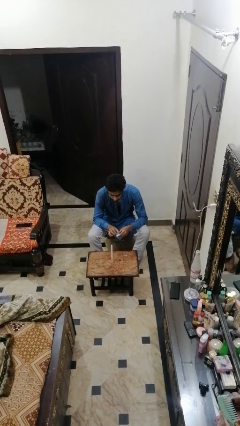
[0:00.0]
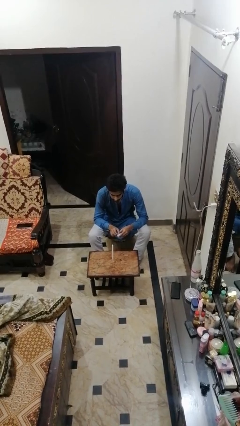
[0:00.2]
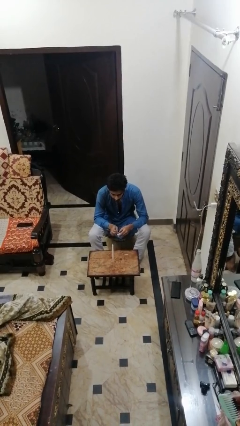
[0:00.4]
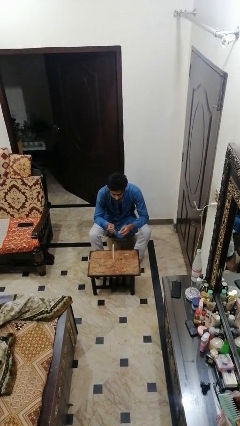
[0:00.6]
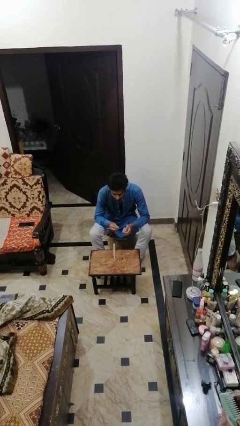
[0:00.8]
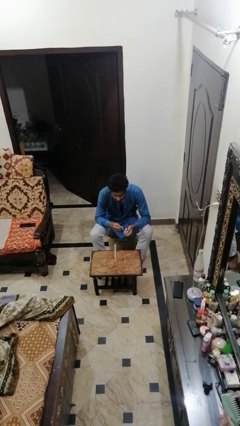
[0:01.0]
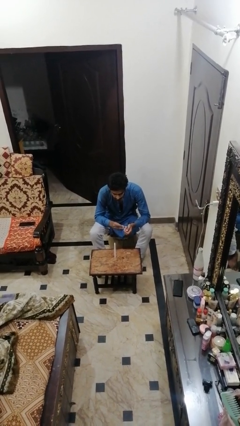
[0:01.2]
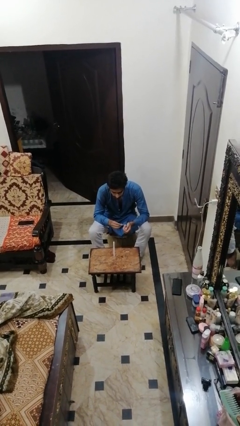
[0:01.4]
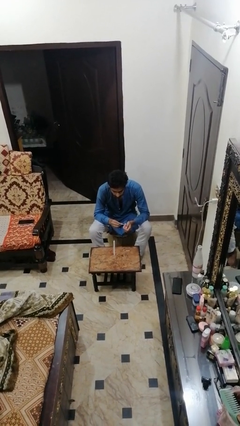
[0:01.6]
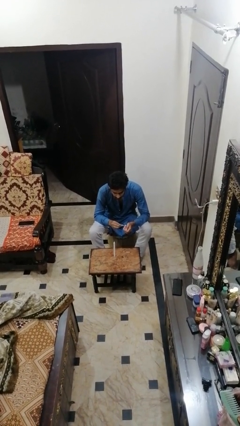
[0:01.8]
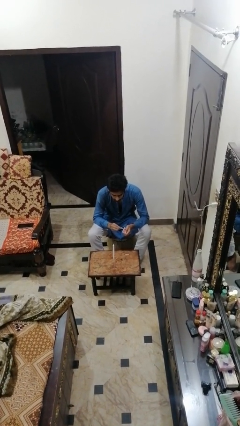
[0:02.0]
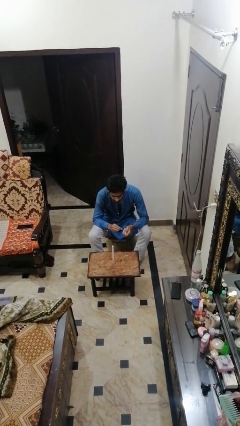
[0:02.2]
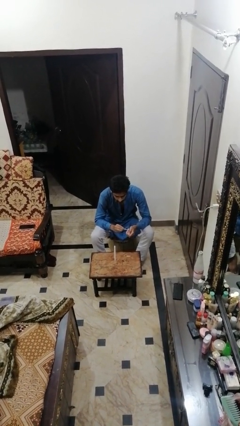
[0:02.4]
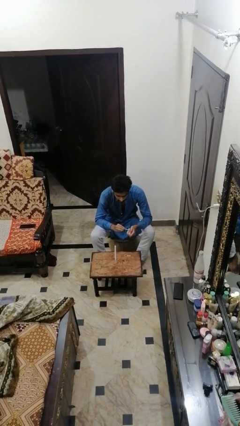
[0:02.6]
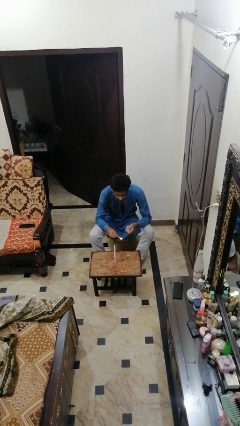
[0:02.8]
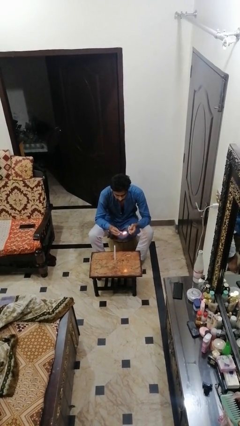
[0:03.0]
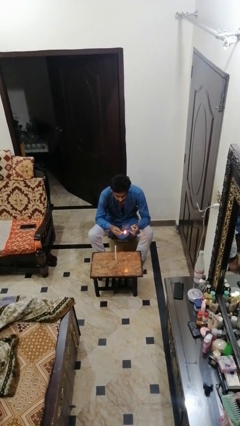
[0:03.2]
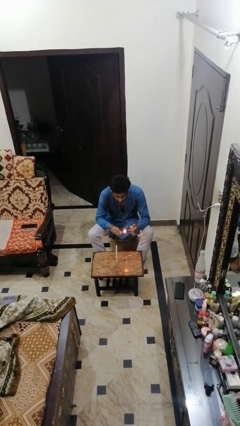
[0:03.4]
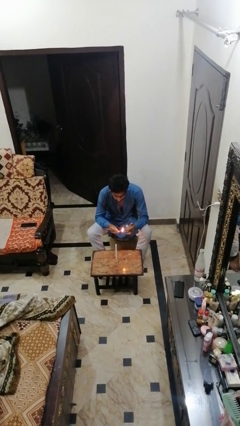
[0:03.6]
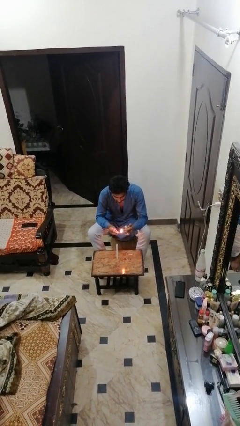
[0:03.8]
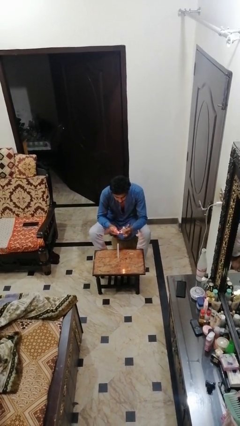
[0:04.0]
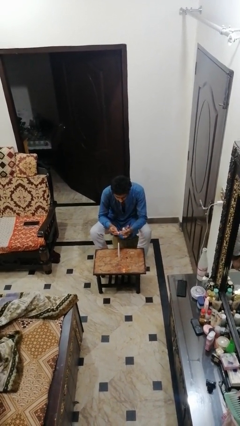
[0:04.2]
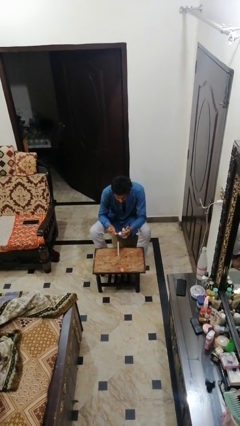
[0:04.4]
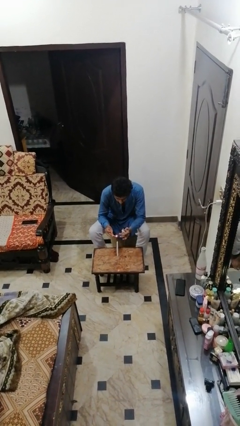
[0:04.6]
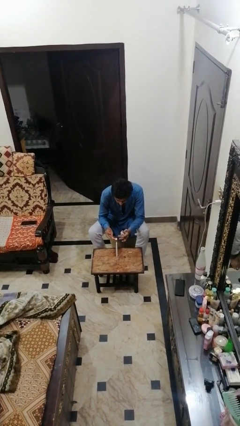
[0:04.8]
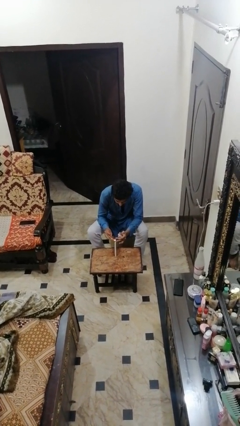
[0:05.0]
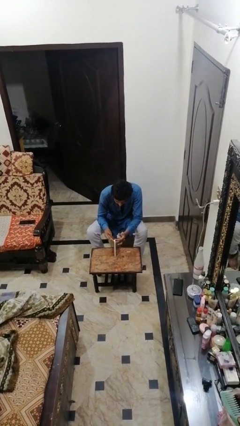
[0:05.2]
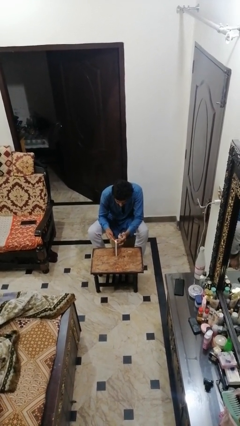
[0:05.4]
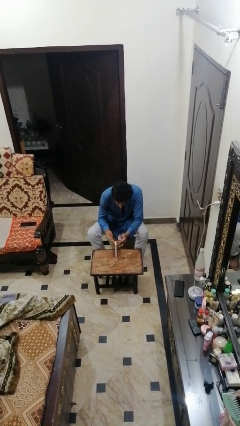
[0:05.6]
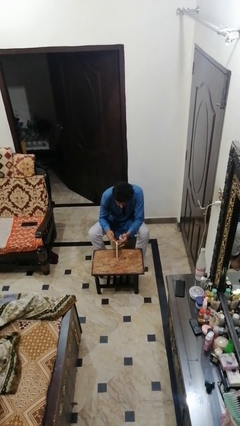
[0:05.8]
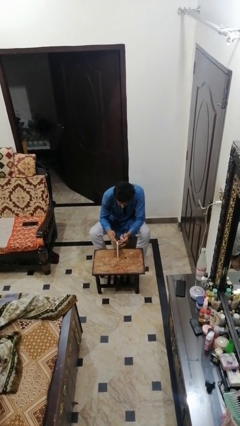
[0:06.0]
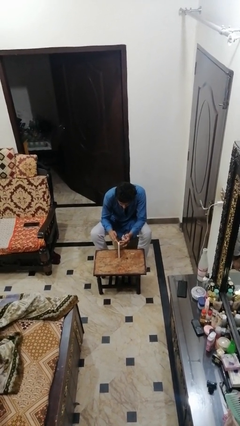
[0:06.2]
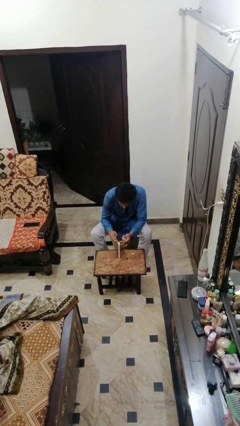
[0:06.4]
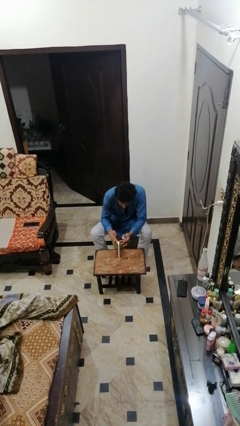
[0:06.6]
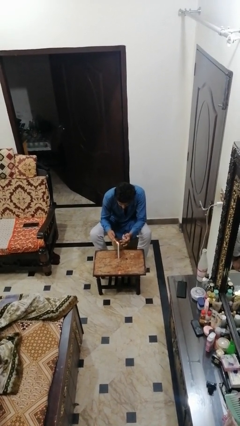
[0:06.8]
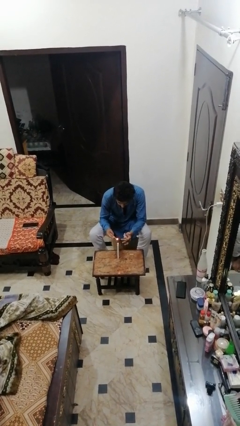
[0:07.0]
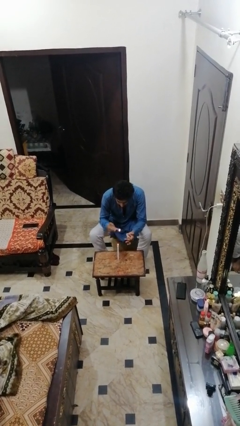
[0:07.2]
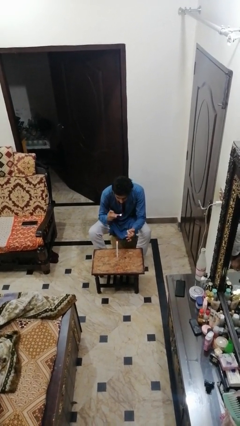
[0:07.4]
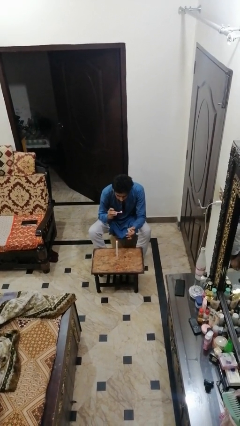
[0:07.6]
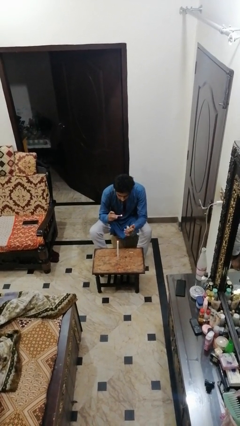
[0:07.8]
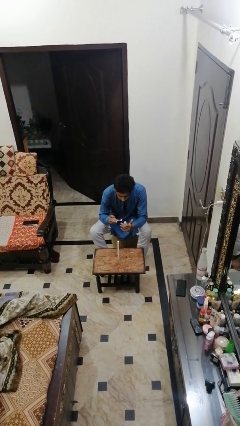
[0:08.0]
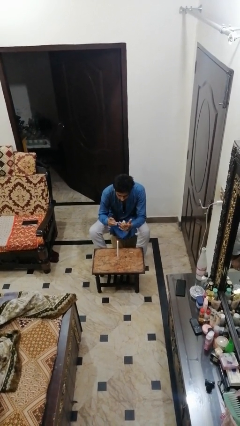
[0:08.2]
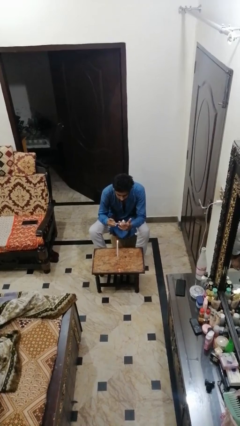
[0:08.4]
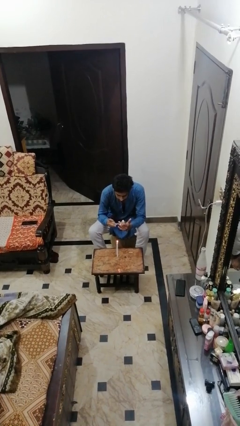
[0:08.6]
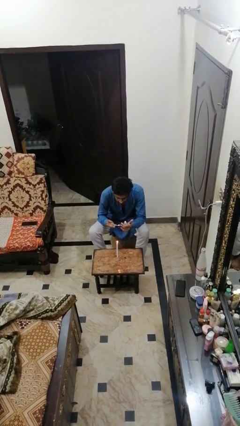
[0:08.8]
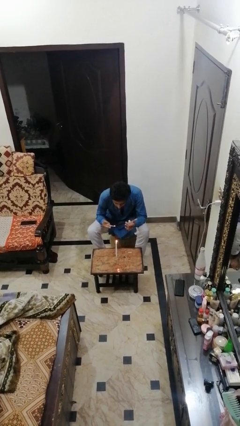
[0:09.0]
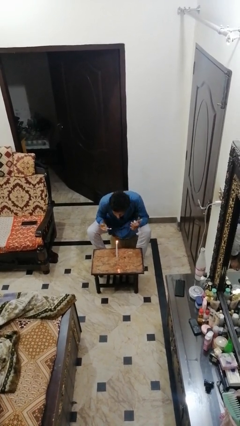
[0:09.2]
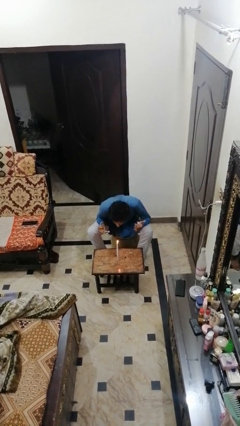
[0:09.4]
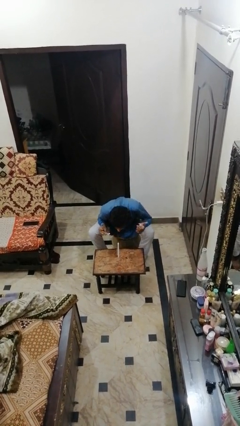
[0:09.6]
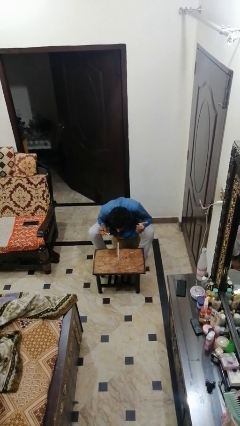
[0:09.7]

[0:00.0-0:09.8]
person lights candle

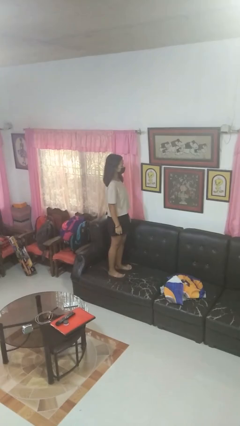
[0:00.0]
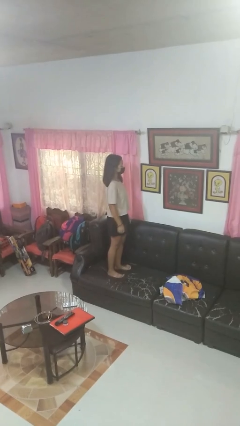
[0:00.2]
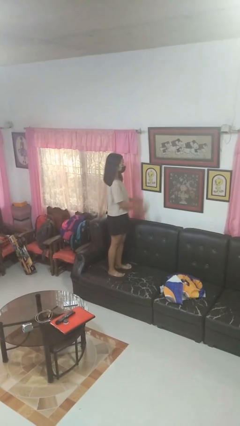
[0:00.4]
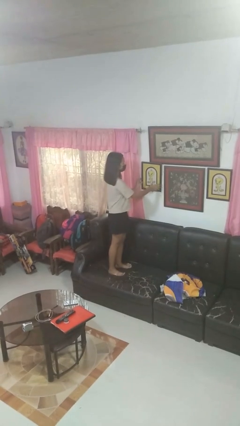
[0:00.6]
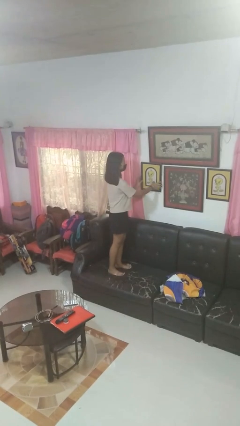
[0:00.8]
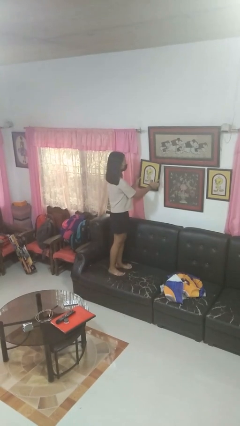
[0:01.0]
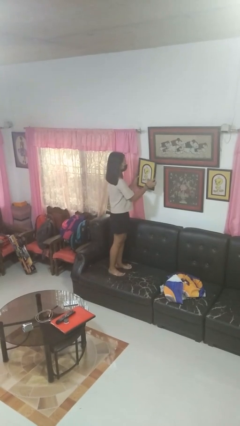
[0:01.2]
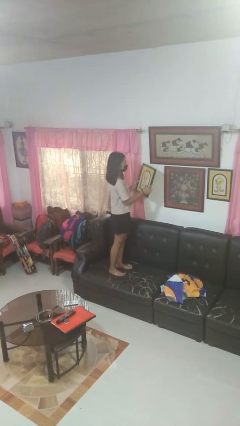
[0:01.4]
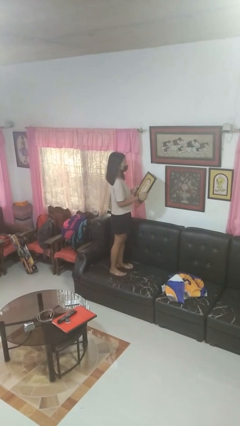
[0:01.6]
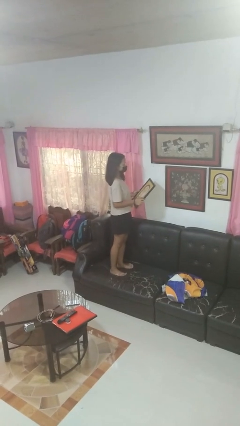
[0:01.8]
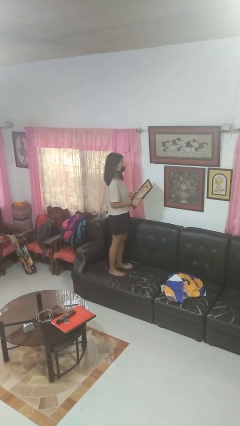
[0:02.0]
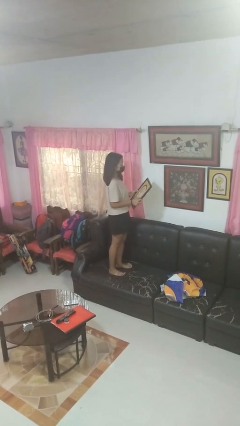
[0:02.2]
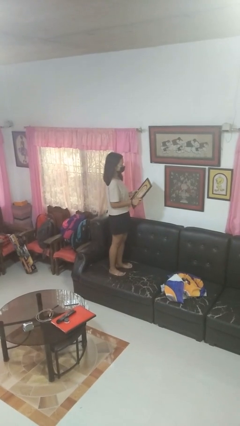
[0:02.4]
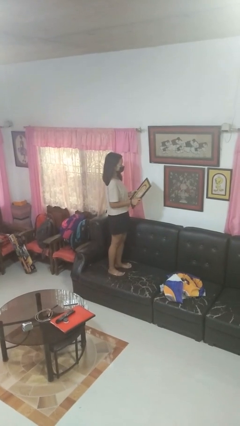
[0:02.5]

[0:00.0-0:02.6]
person takes down picture frame

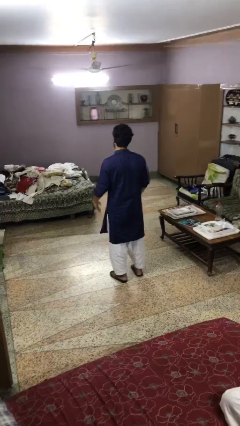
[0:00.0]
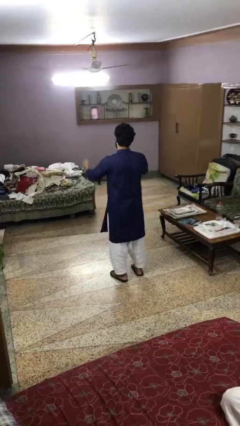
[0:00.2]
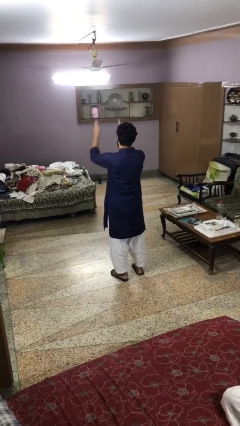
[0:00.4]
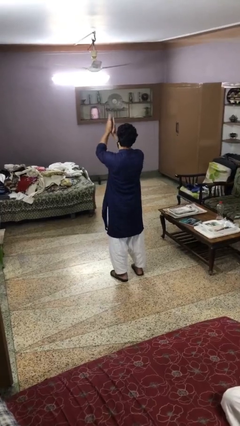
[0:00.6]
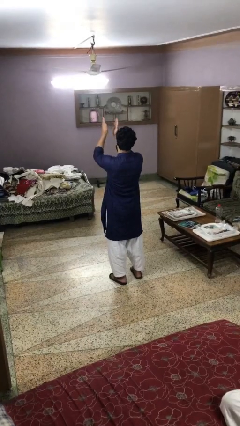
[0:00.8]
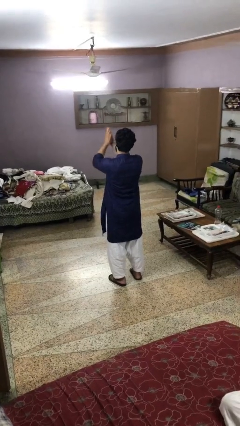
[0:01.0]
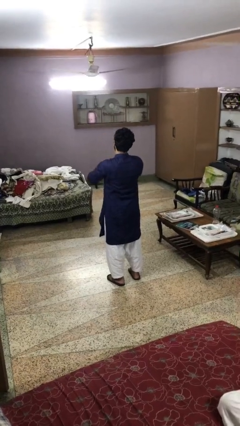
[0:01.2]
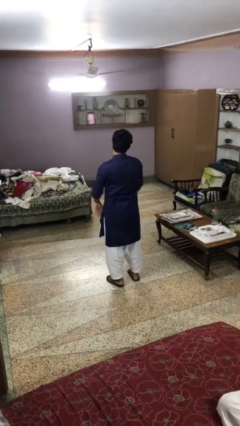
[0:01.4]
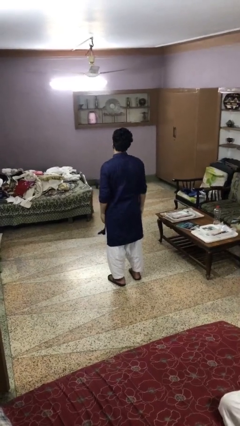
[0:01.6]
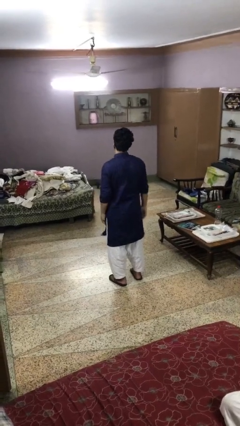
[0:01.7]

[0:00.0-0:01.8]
person claps hands

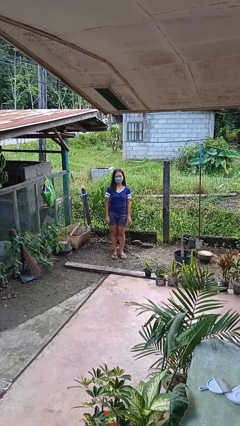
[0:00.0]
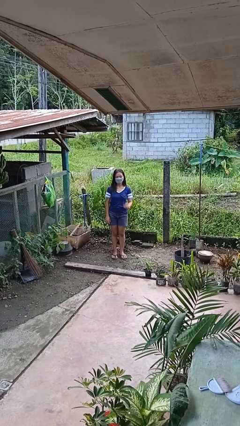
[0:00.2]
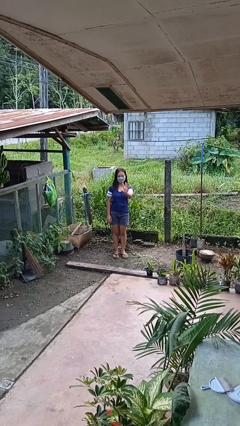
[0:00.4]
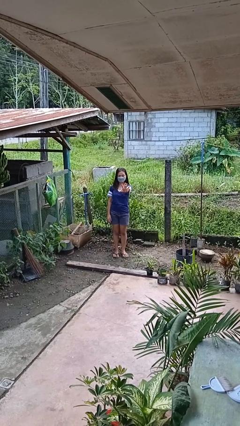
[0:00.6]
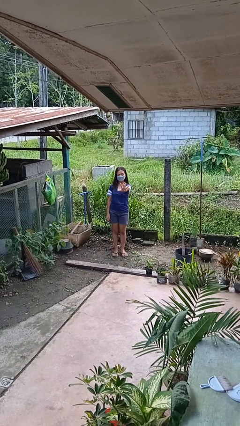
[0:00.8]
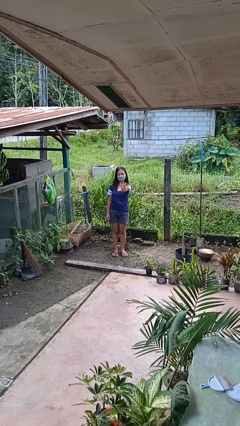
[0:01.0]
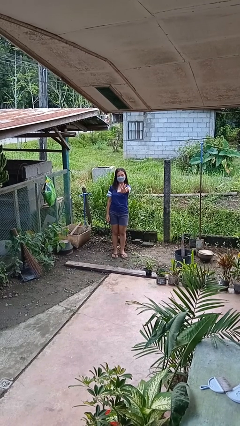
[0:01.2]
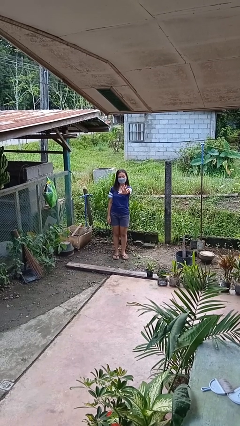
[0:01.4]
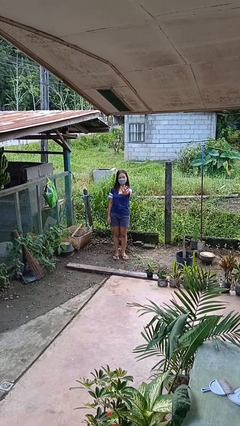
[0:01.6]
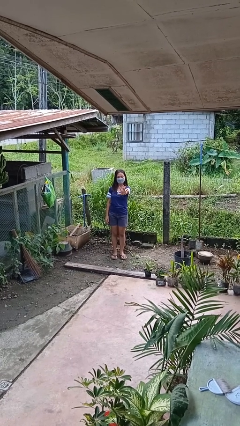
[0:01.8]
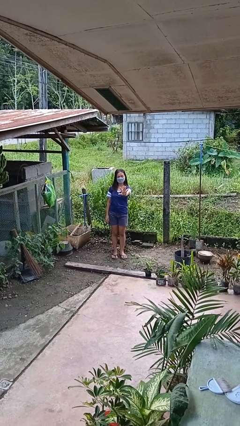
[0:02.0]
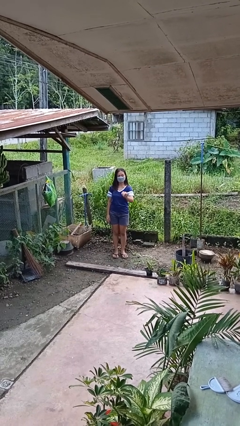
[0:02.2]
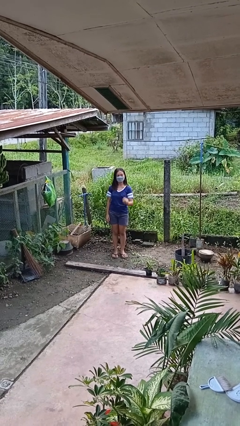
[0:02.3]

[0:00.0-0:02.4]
person gestures number five

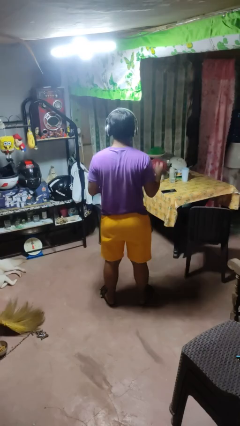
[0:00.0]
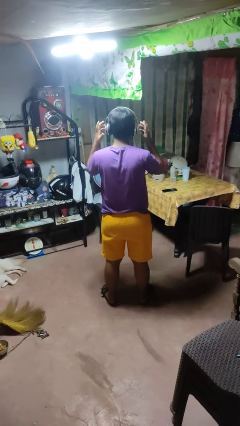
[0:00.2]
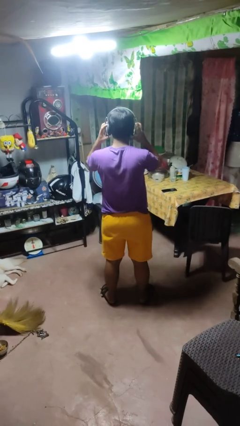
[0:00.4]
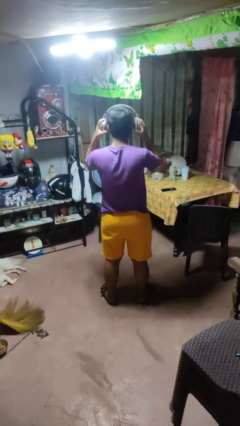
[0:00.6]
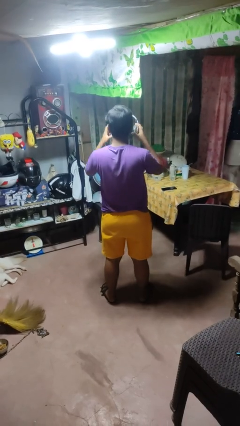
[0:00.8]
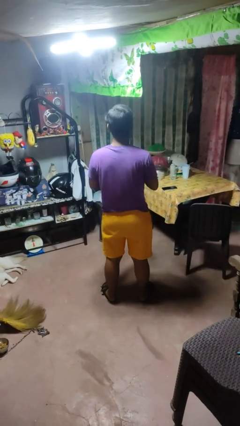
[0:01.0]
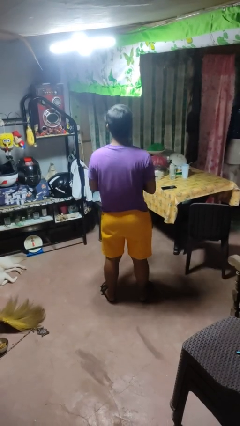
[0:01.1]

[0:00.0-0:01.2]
person takes off headphones
